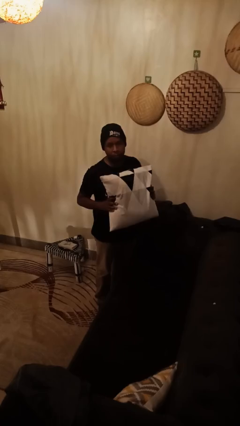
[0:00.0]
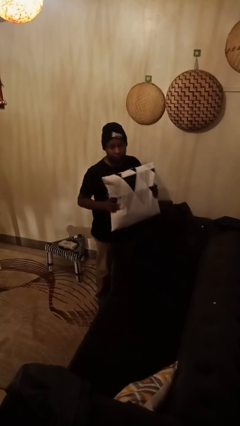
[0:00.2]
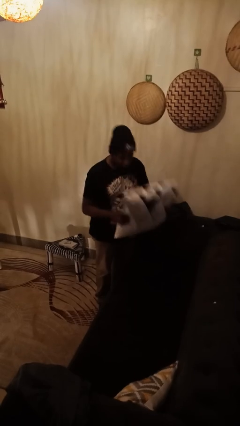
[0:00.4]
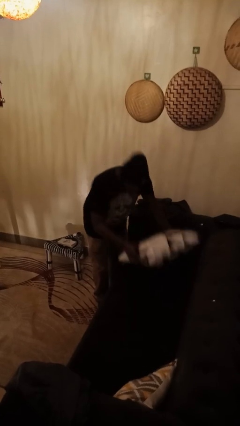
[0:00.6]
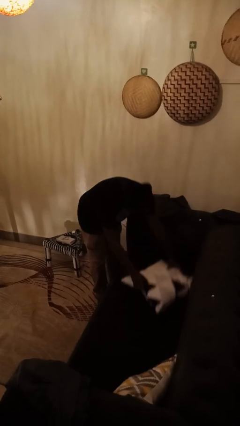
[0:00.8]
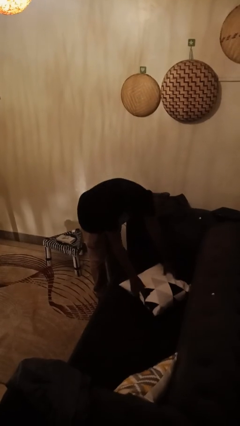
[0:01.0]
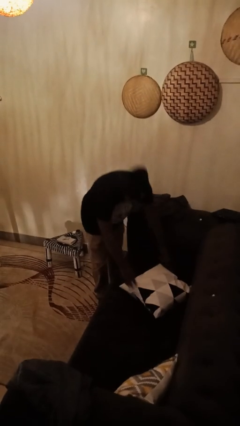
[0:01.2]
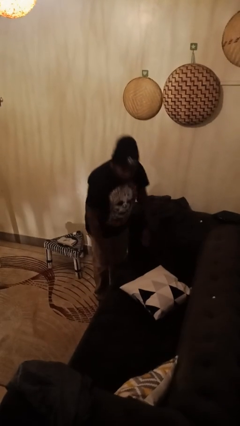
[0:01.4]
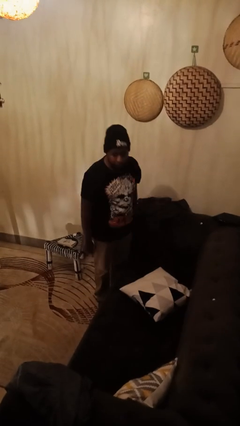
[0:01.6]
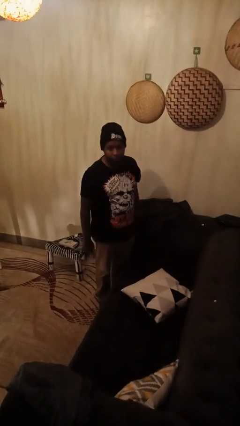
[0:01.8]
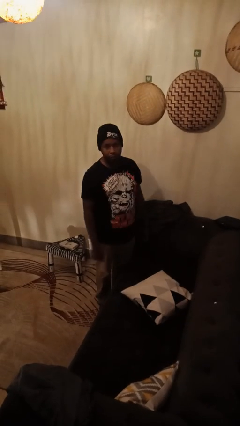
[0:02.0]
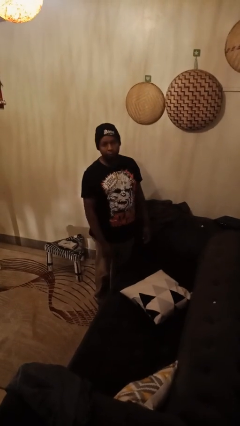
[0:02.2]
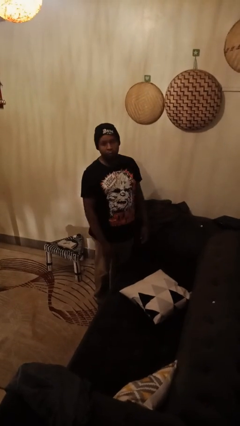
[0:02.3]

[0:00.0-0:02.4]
person puts down object on couch

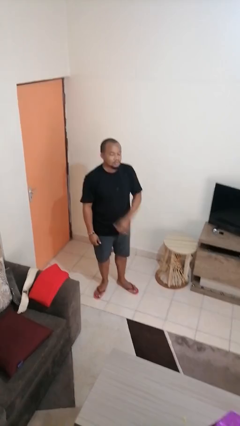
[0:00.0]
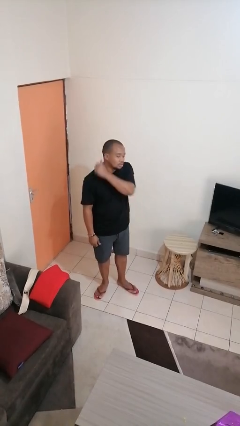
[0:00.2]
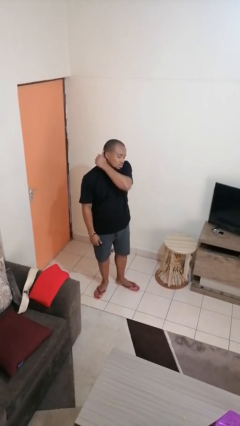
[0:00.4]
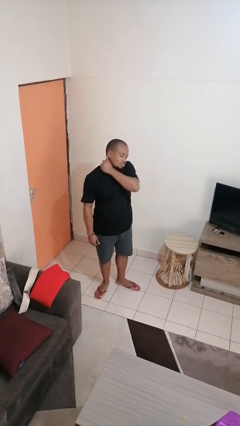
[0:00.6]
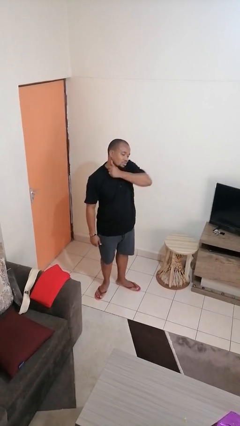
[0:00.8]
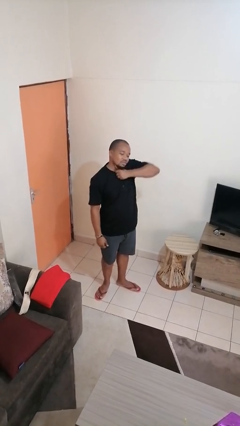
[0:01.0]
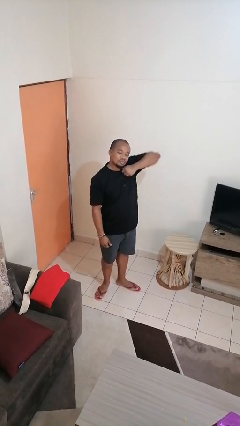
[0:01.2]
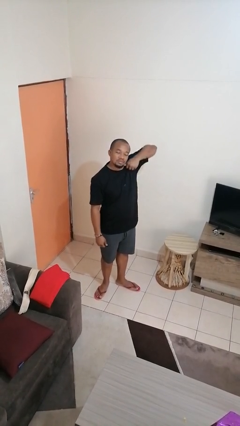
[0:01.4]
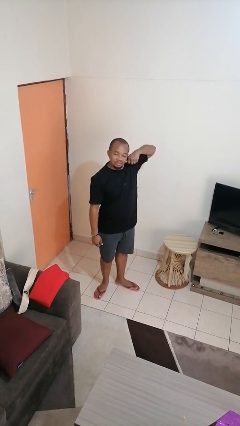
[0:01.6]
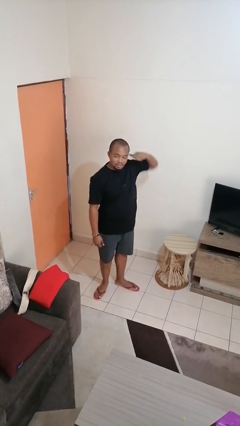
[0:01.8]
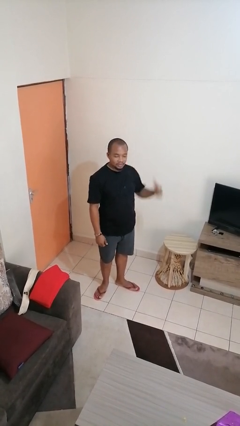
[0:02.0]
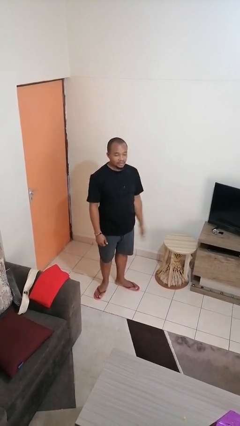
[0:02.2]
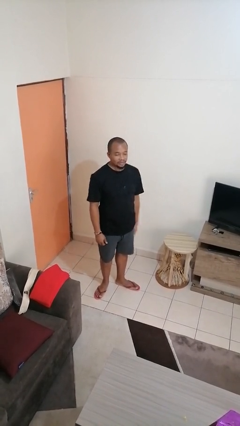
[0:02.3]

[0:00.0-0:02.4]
person gestures cut

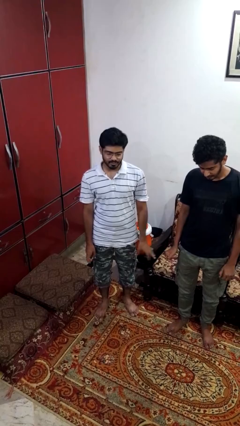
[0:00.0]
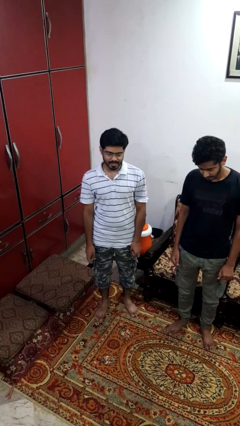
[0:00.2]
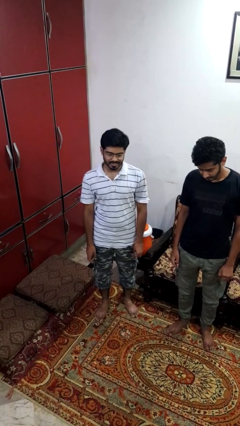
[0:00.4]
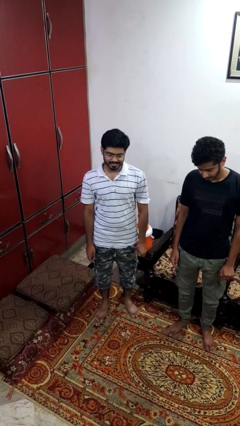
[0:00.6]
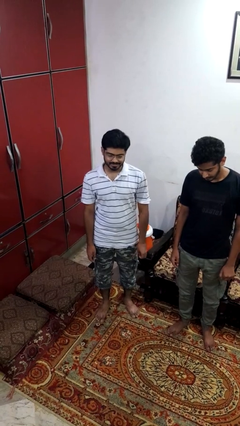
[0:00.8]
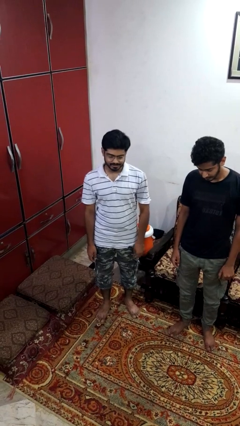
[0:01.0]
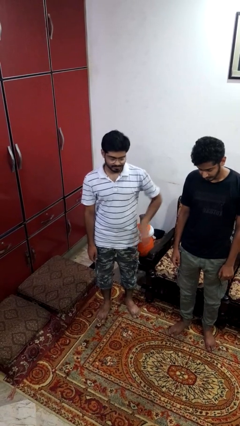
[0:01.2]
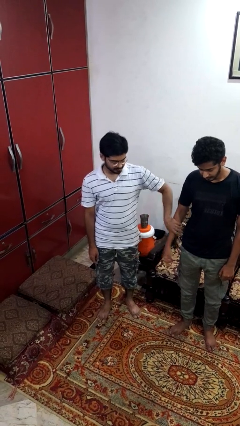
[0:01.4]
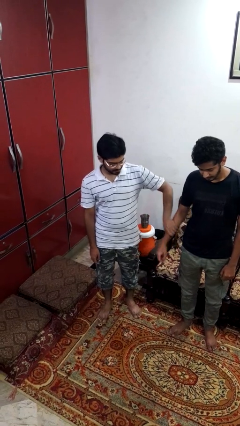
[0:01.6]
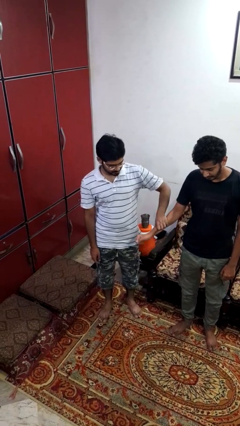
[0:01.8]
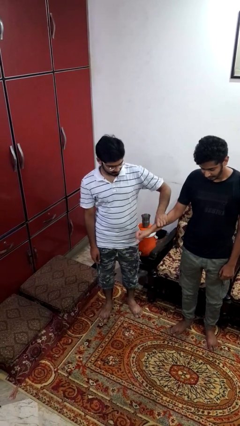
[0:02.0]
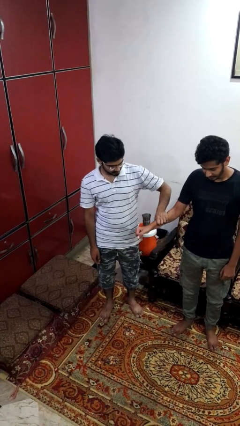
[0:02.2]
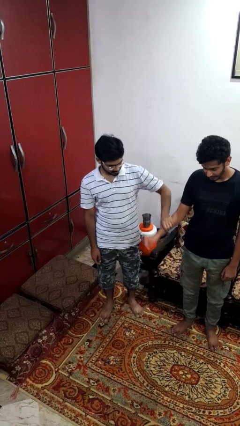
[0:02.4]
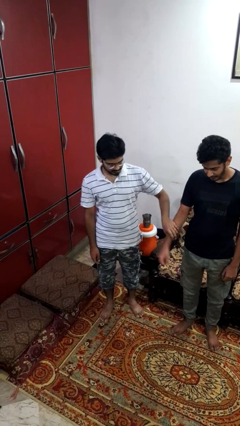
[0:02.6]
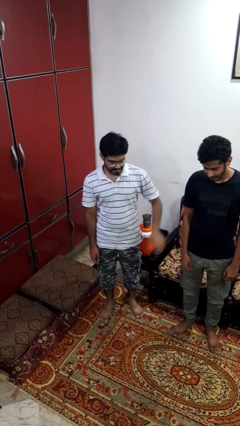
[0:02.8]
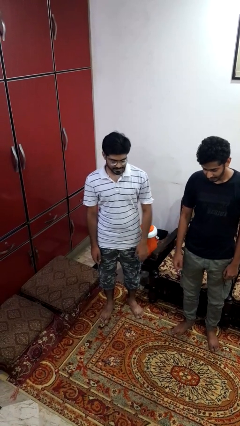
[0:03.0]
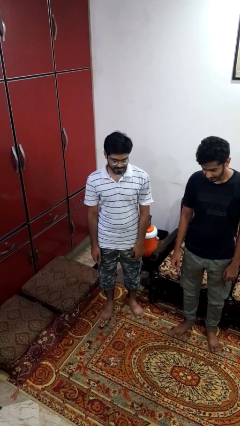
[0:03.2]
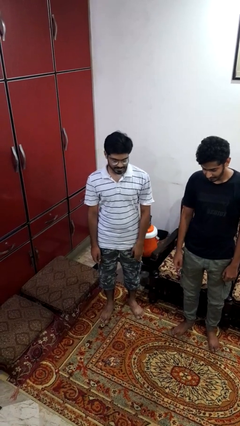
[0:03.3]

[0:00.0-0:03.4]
person grabs person by forearm

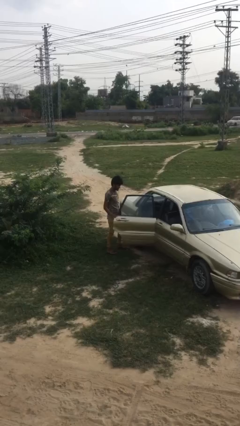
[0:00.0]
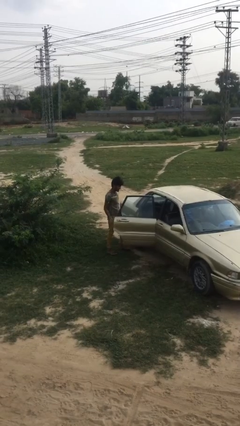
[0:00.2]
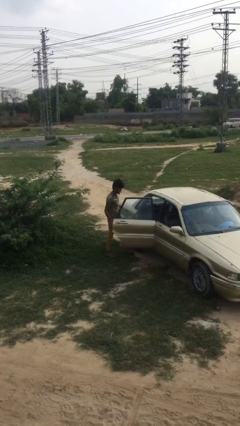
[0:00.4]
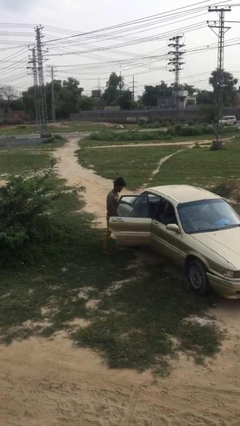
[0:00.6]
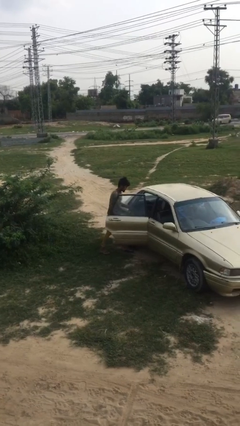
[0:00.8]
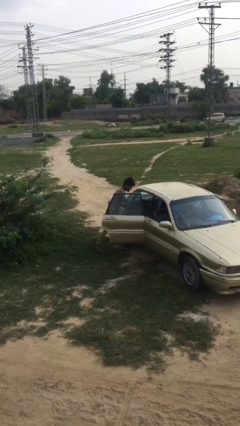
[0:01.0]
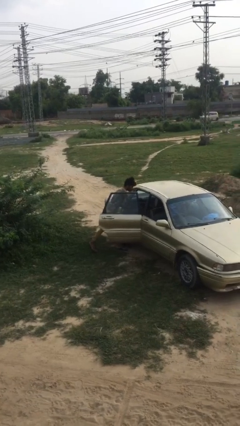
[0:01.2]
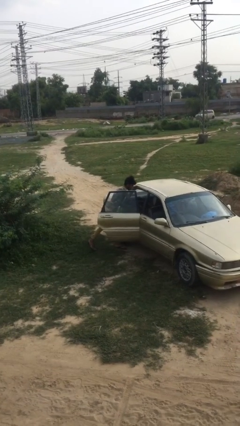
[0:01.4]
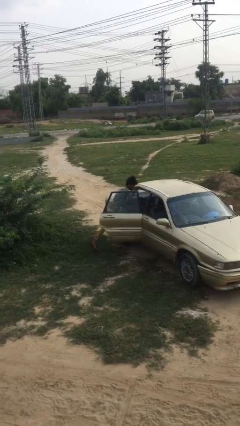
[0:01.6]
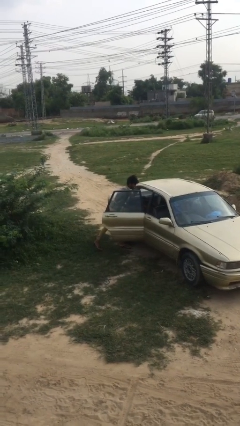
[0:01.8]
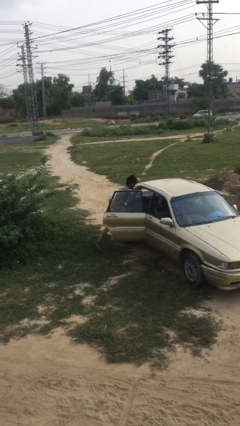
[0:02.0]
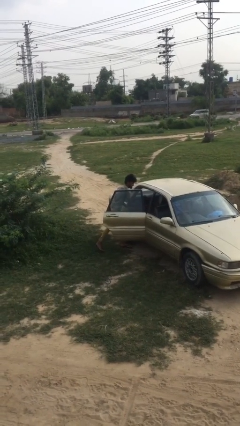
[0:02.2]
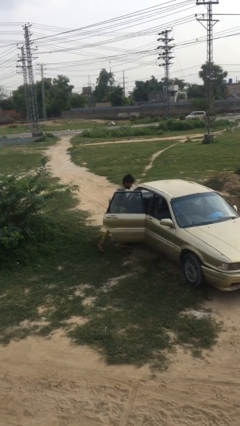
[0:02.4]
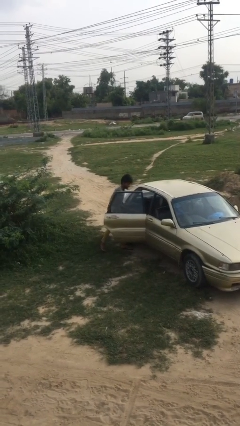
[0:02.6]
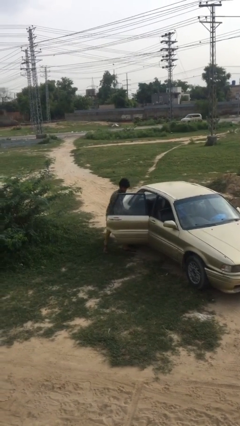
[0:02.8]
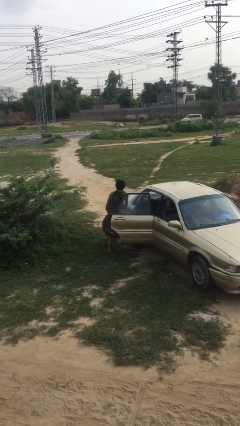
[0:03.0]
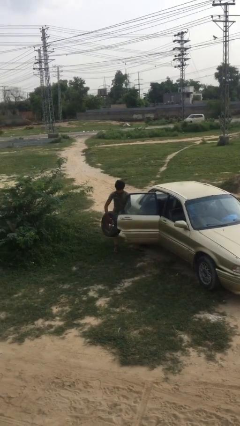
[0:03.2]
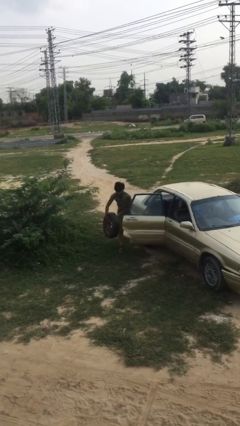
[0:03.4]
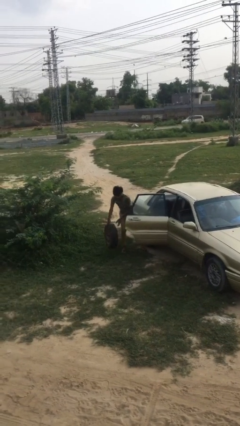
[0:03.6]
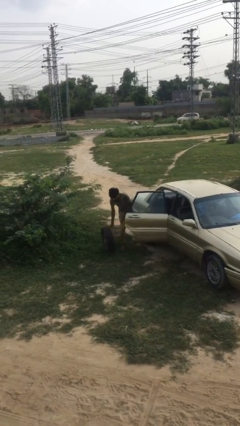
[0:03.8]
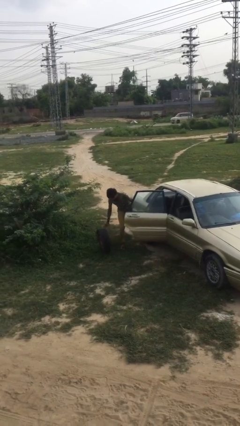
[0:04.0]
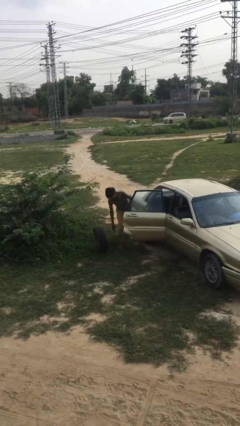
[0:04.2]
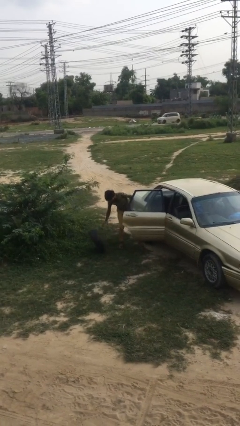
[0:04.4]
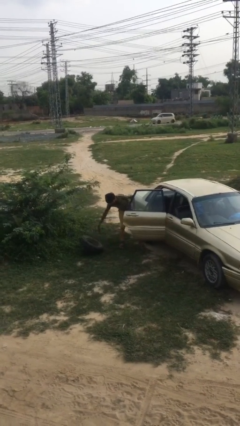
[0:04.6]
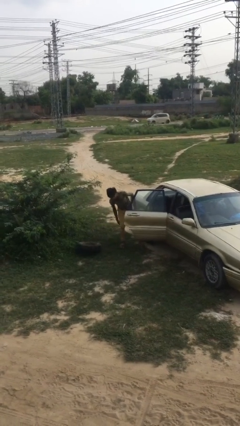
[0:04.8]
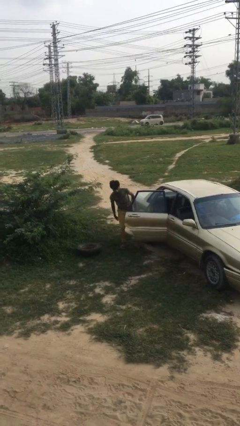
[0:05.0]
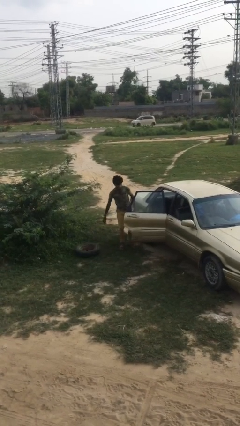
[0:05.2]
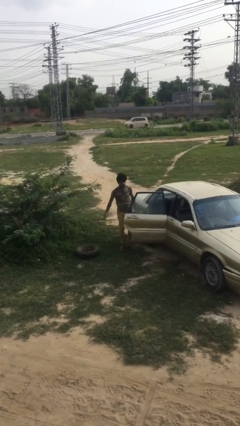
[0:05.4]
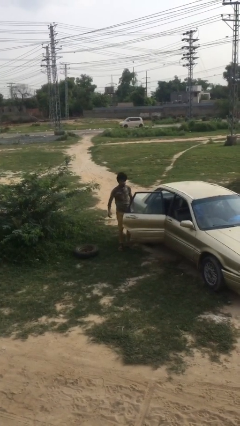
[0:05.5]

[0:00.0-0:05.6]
person unloads car

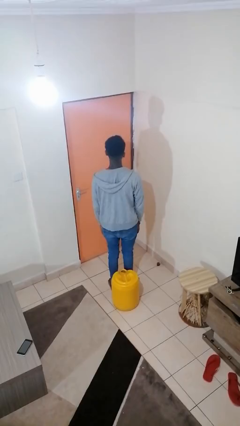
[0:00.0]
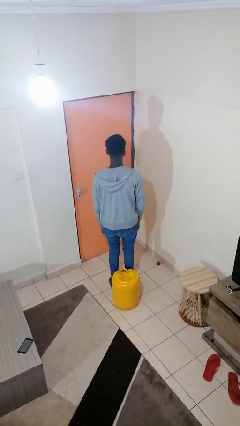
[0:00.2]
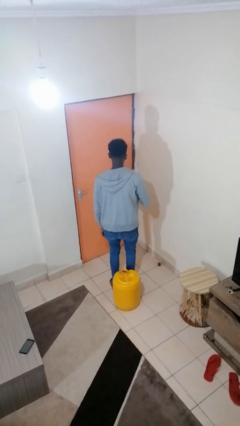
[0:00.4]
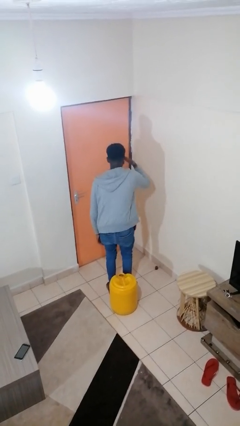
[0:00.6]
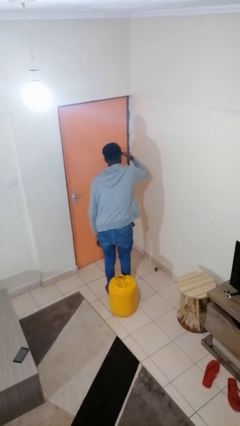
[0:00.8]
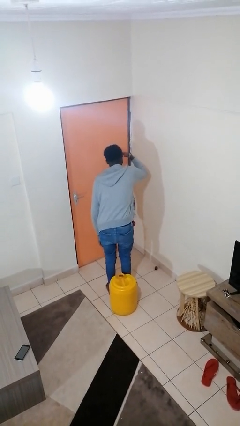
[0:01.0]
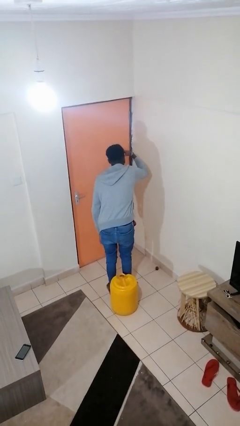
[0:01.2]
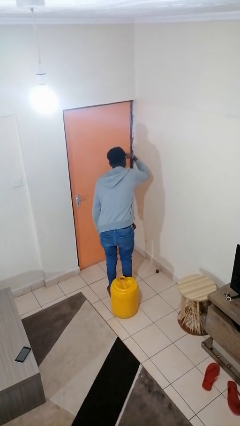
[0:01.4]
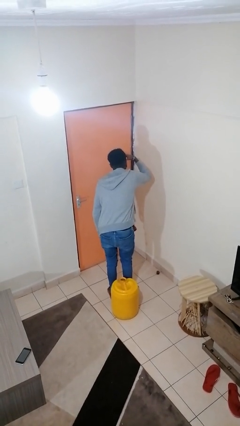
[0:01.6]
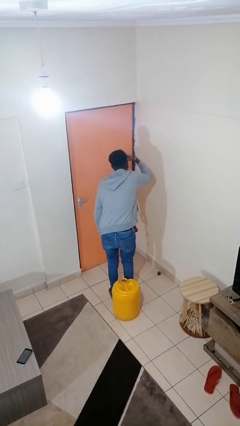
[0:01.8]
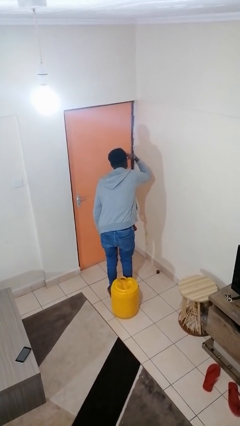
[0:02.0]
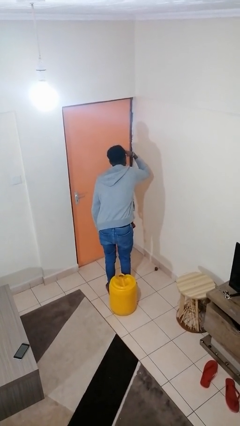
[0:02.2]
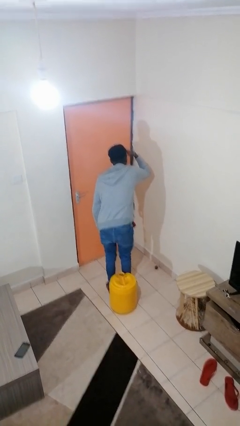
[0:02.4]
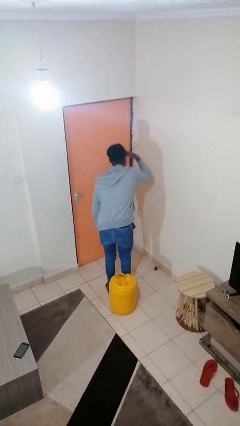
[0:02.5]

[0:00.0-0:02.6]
person shades eyes

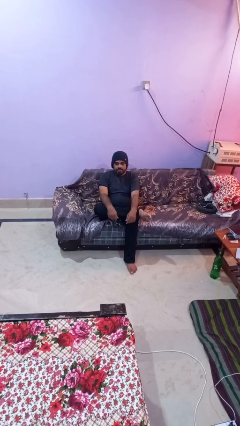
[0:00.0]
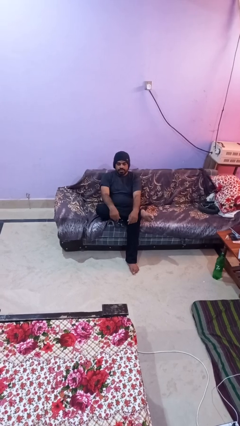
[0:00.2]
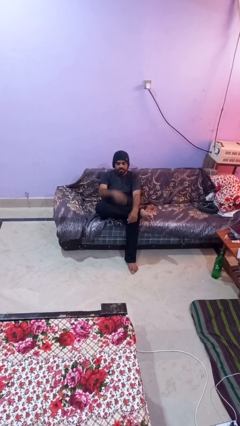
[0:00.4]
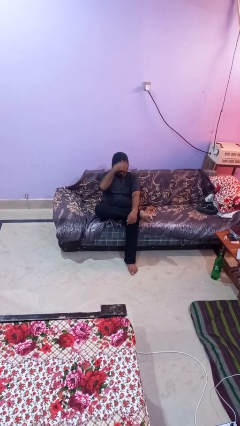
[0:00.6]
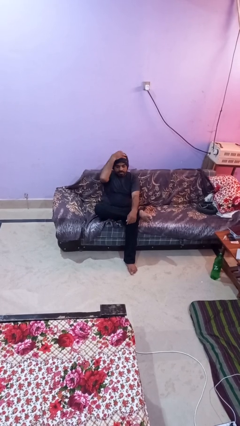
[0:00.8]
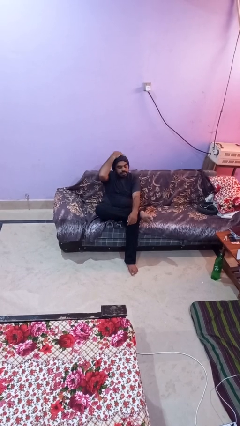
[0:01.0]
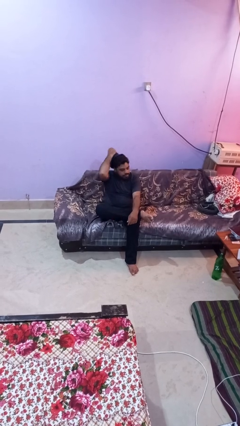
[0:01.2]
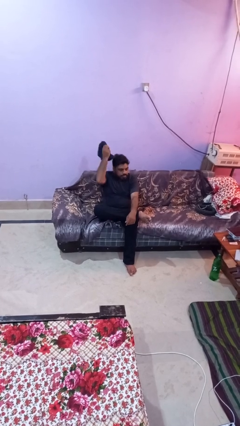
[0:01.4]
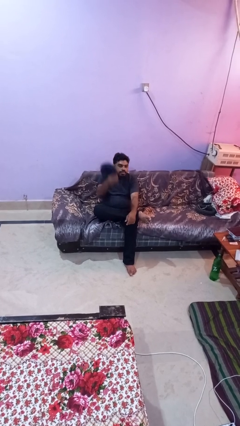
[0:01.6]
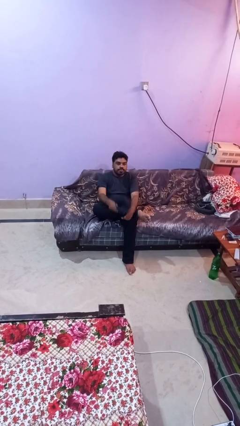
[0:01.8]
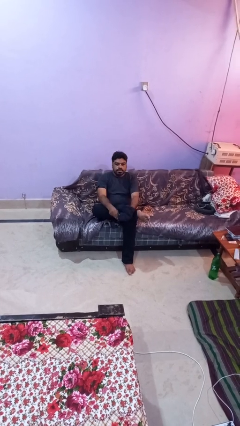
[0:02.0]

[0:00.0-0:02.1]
person takes off hat
